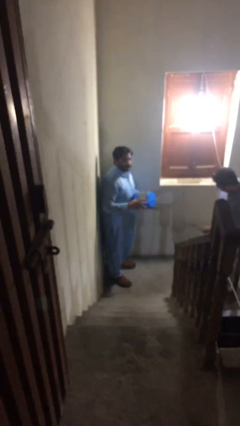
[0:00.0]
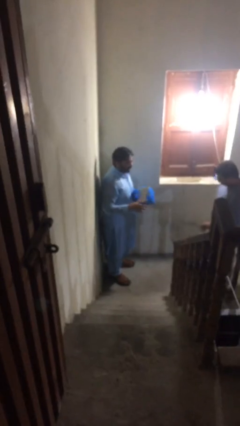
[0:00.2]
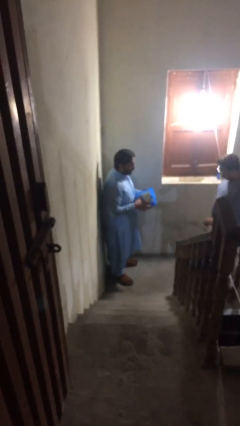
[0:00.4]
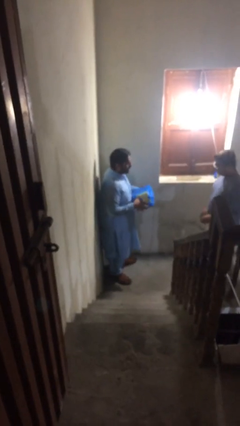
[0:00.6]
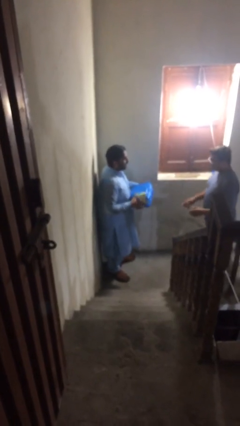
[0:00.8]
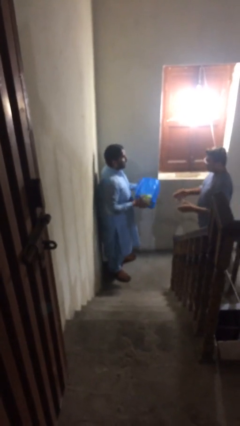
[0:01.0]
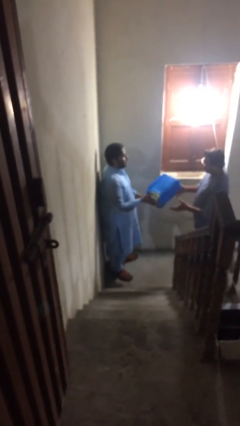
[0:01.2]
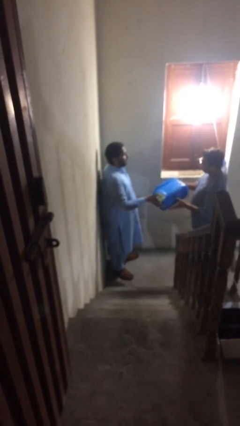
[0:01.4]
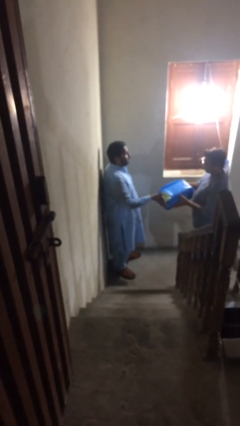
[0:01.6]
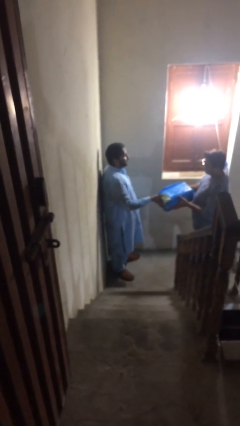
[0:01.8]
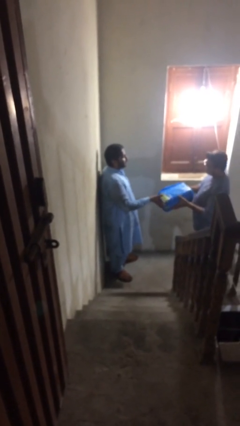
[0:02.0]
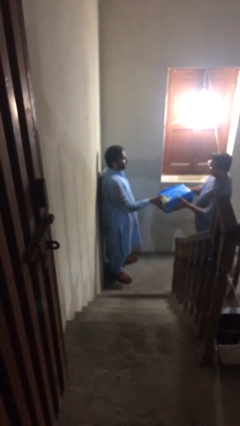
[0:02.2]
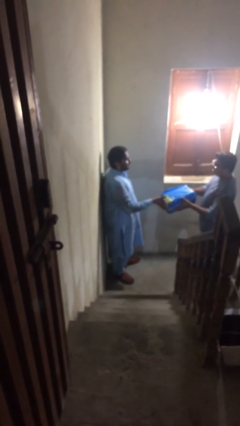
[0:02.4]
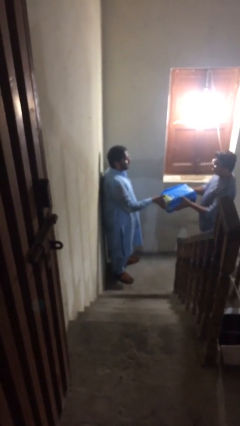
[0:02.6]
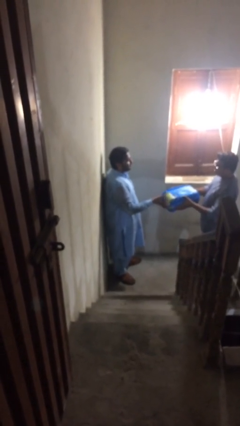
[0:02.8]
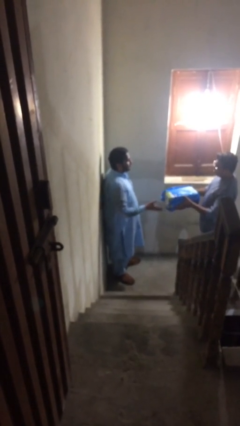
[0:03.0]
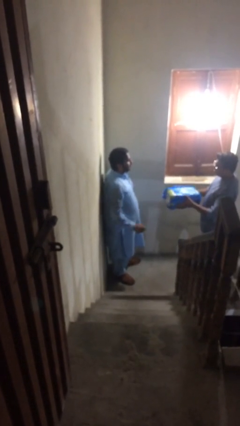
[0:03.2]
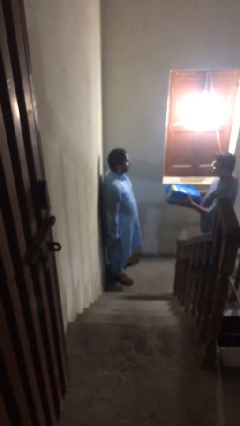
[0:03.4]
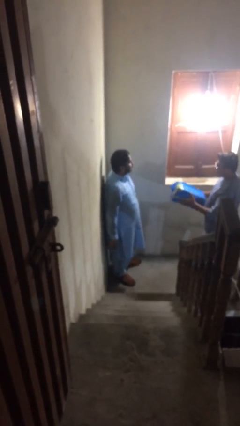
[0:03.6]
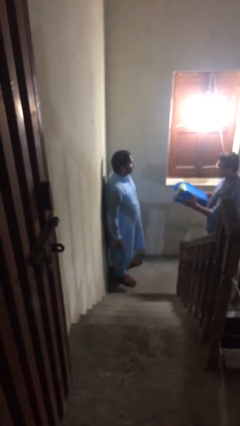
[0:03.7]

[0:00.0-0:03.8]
person transfers object to person

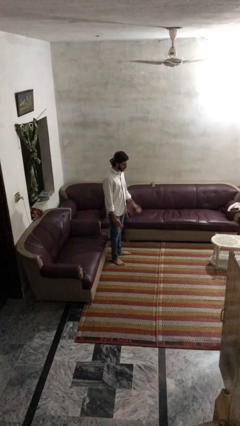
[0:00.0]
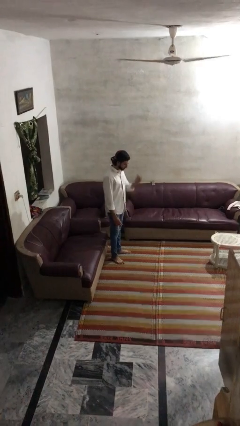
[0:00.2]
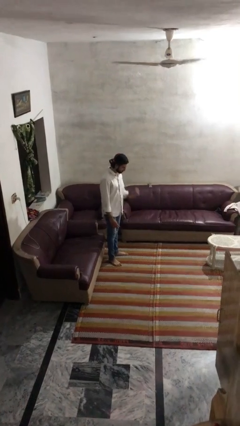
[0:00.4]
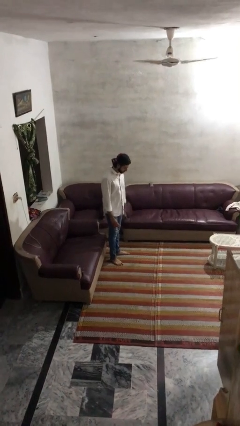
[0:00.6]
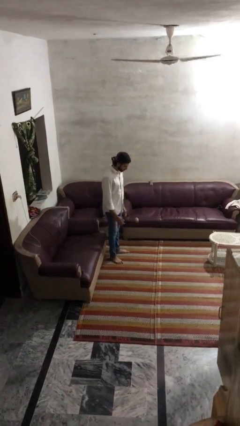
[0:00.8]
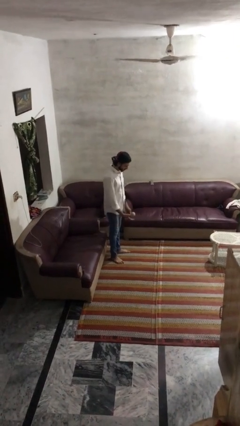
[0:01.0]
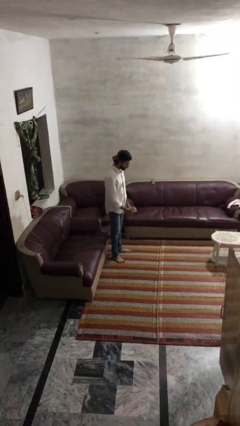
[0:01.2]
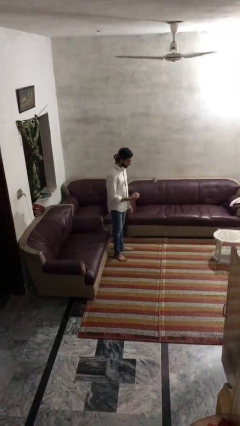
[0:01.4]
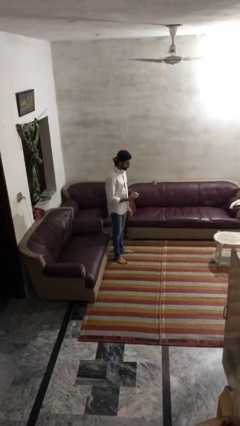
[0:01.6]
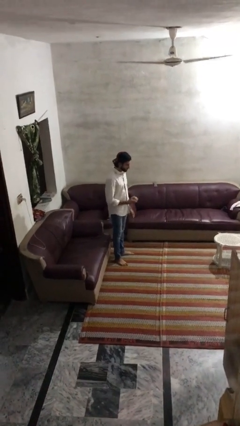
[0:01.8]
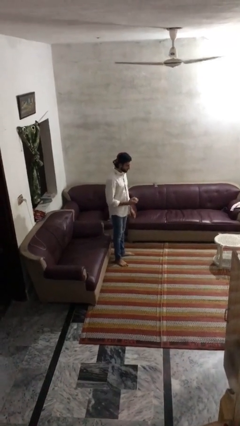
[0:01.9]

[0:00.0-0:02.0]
person bounces ball on floor

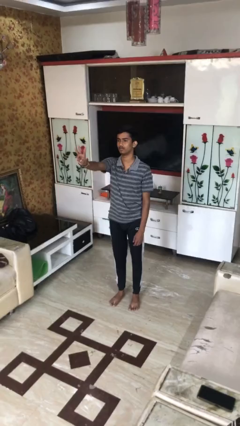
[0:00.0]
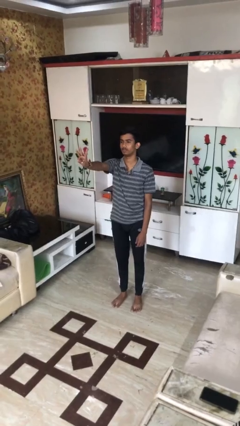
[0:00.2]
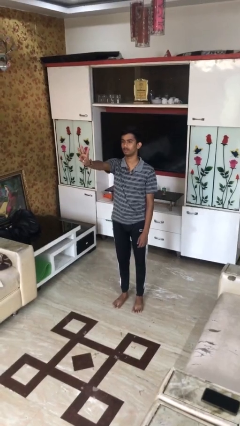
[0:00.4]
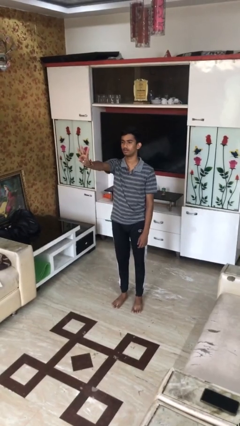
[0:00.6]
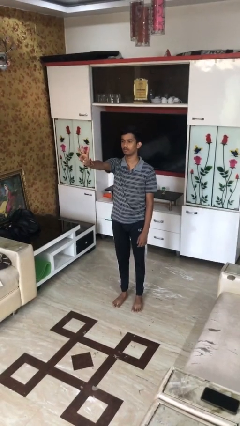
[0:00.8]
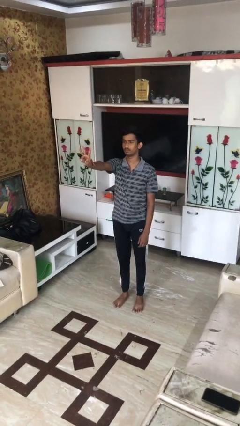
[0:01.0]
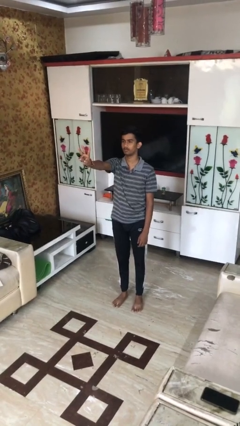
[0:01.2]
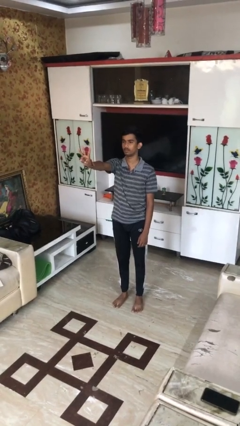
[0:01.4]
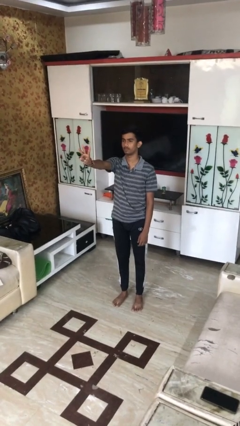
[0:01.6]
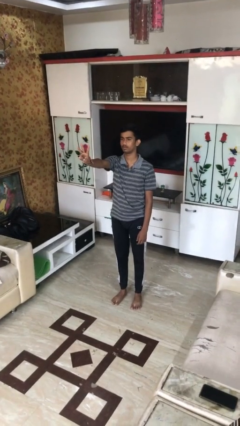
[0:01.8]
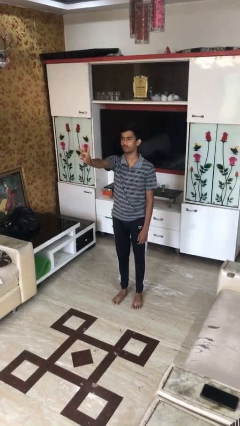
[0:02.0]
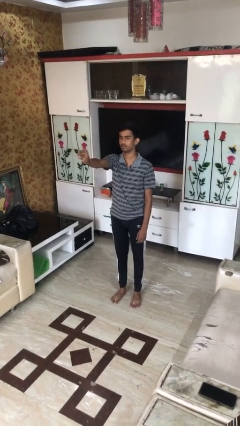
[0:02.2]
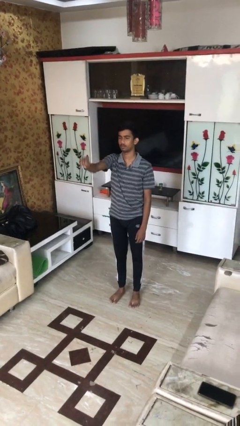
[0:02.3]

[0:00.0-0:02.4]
person gestures number three

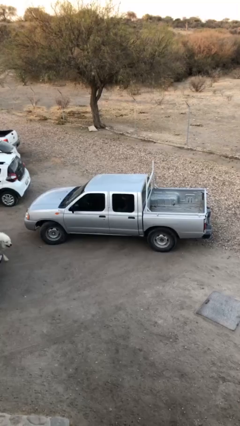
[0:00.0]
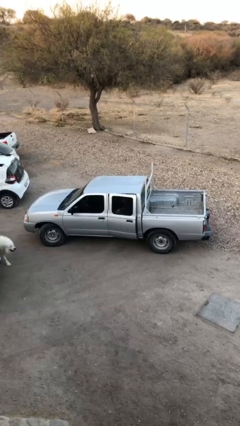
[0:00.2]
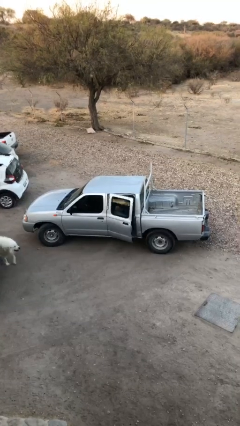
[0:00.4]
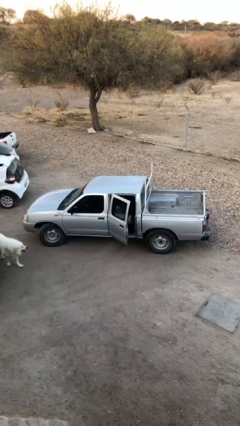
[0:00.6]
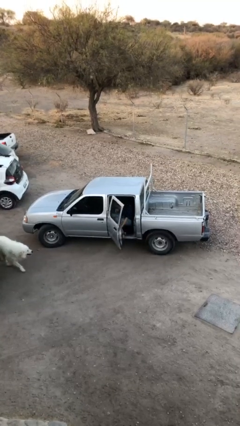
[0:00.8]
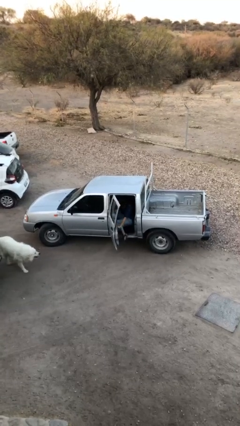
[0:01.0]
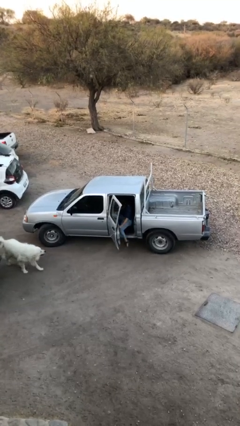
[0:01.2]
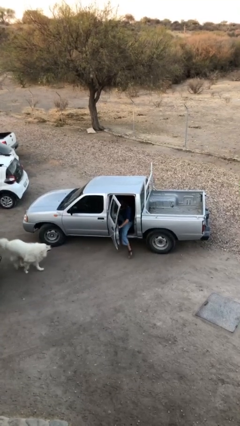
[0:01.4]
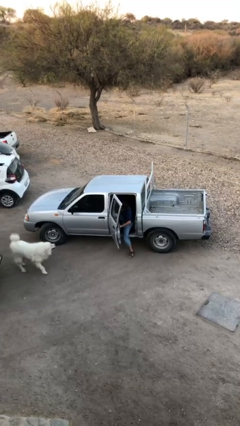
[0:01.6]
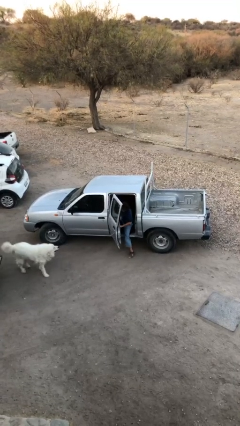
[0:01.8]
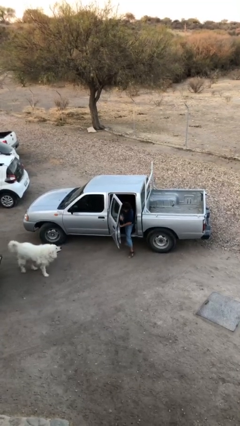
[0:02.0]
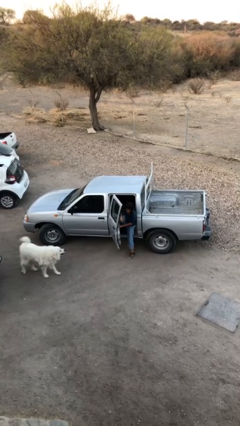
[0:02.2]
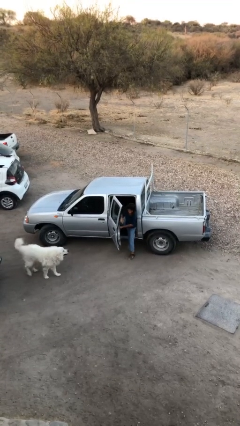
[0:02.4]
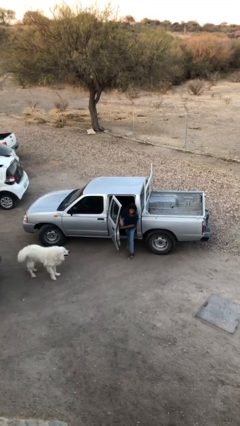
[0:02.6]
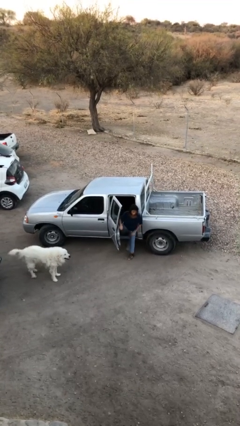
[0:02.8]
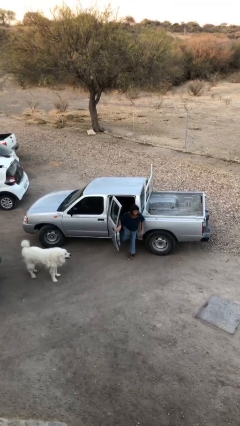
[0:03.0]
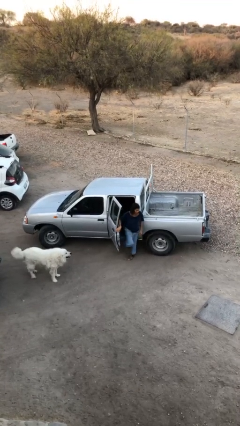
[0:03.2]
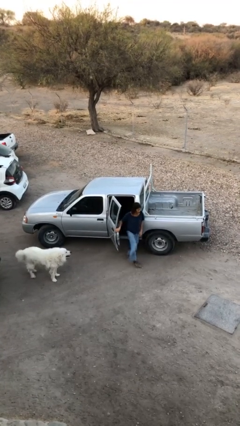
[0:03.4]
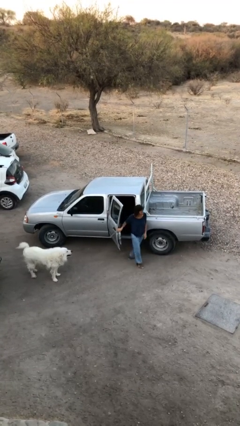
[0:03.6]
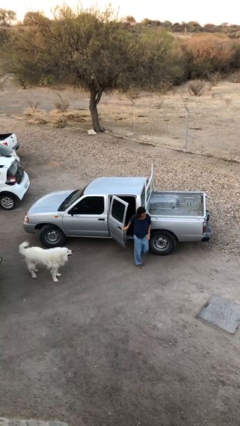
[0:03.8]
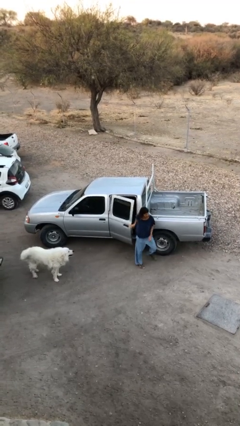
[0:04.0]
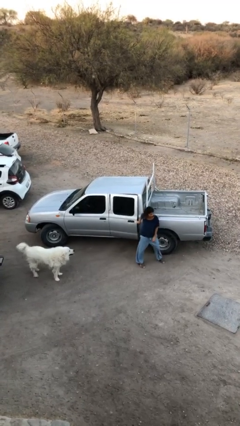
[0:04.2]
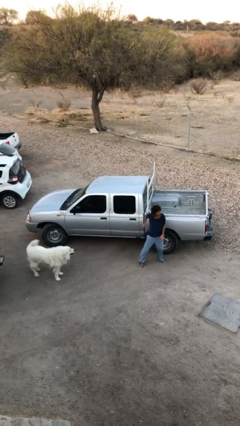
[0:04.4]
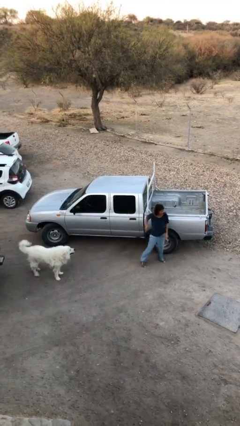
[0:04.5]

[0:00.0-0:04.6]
car drops off person

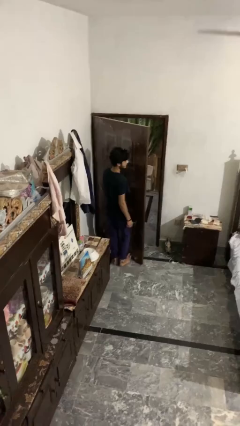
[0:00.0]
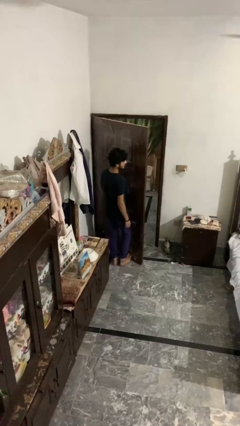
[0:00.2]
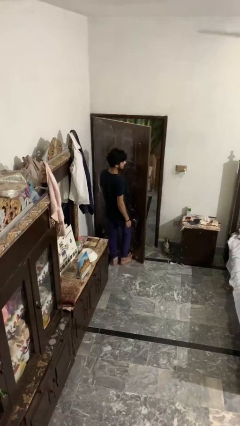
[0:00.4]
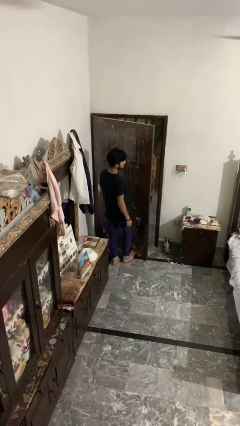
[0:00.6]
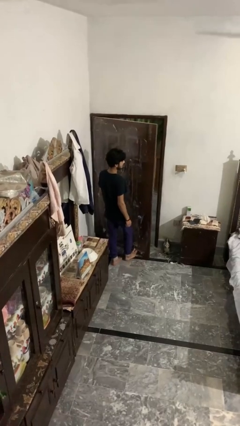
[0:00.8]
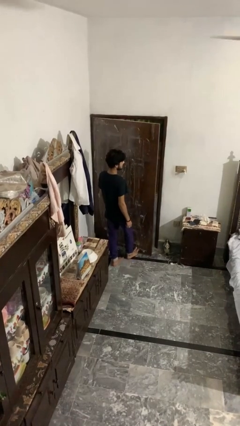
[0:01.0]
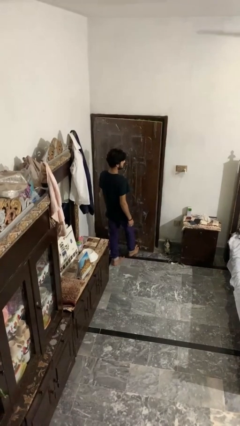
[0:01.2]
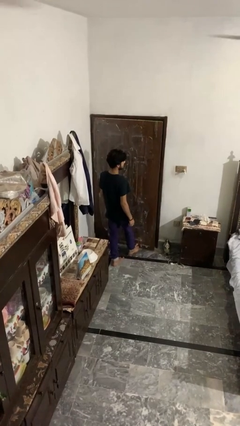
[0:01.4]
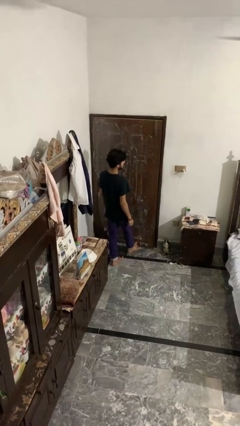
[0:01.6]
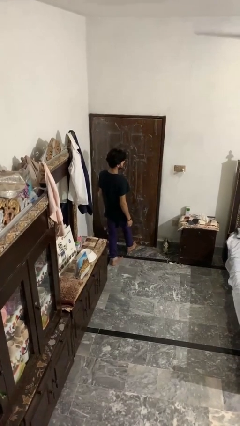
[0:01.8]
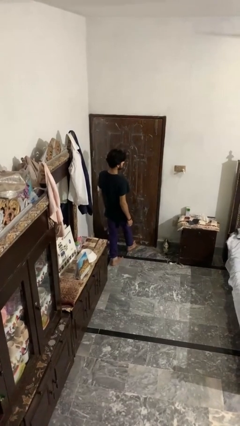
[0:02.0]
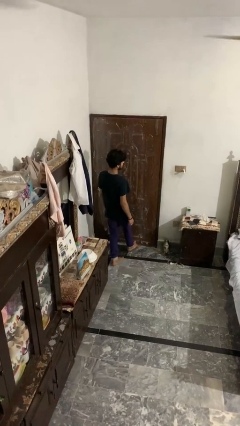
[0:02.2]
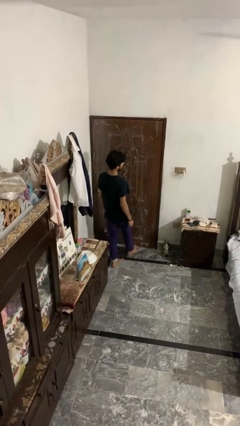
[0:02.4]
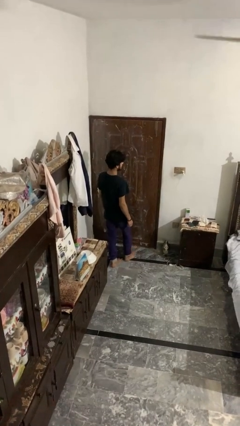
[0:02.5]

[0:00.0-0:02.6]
person closes door with foot

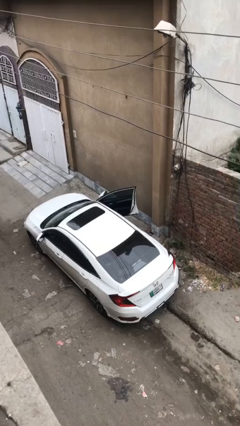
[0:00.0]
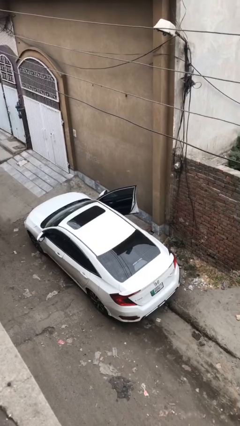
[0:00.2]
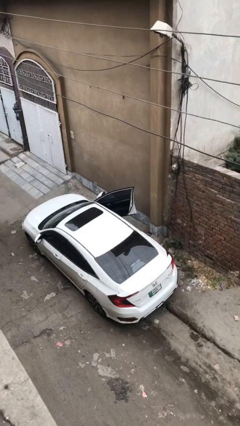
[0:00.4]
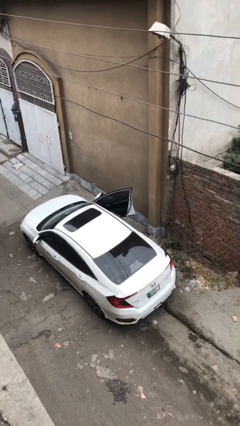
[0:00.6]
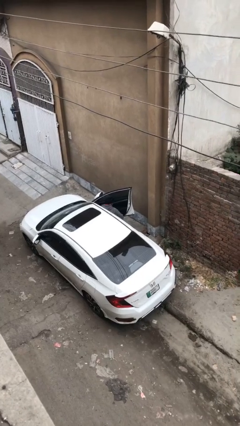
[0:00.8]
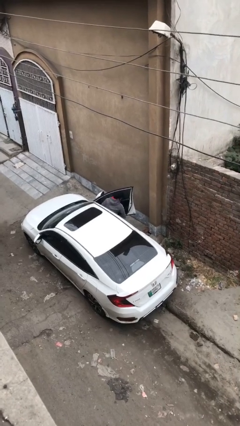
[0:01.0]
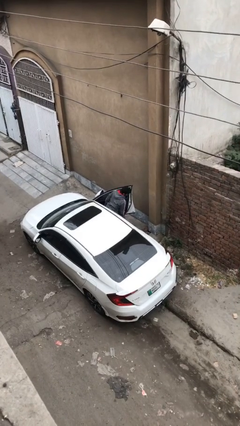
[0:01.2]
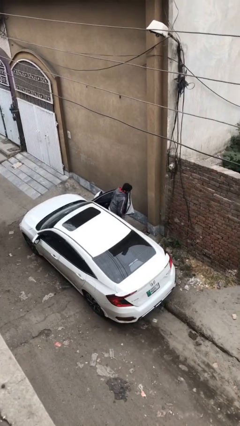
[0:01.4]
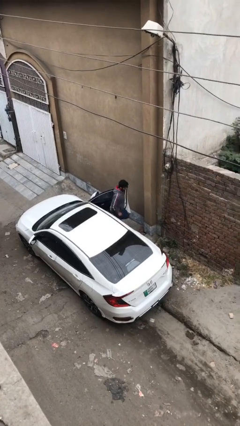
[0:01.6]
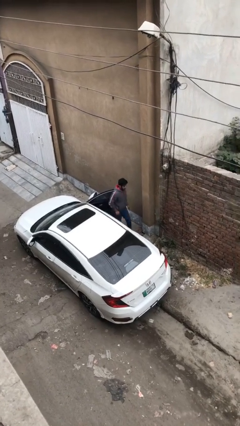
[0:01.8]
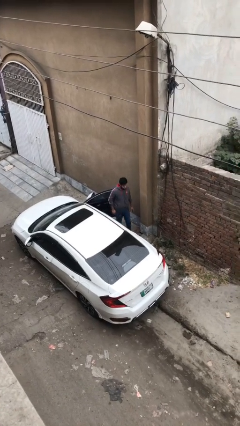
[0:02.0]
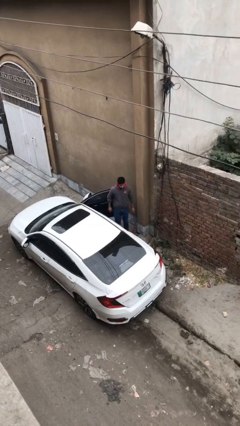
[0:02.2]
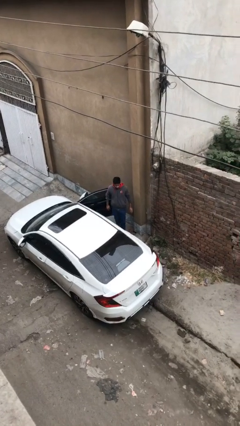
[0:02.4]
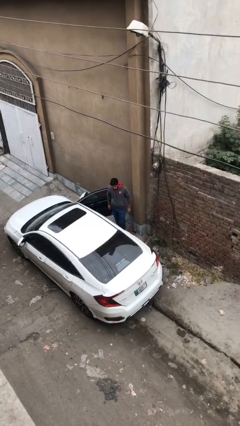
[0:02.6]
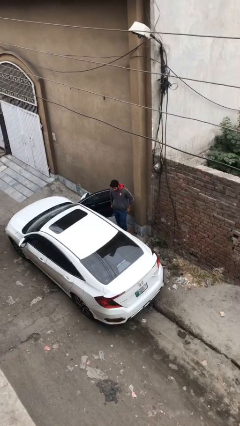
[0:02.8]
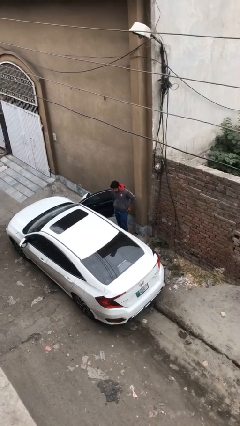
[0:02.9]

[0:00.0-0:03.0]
person exits car
